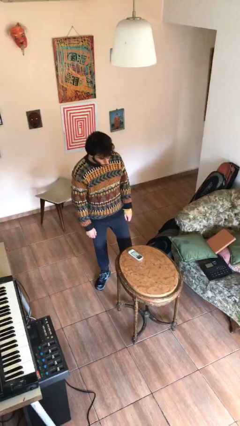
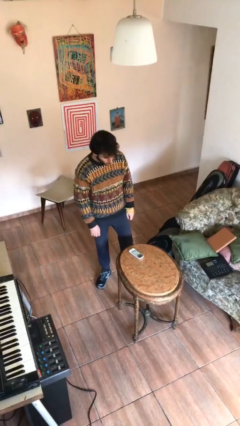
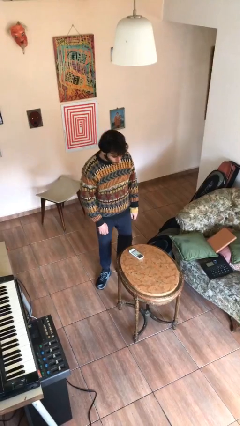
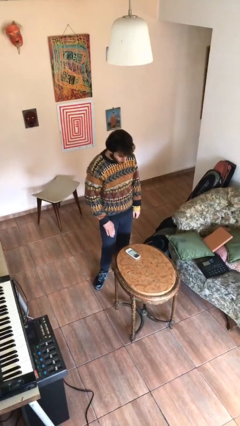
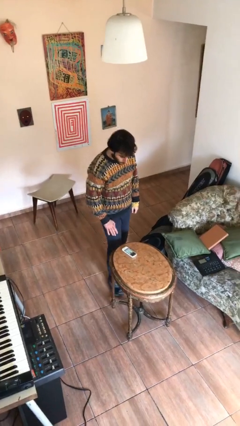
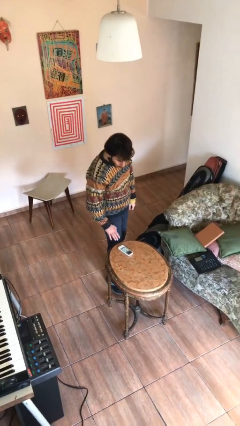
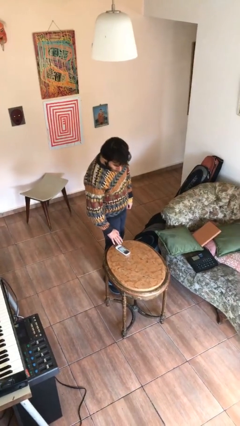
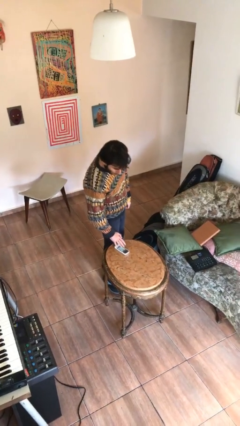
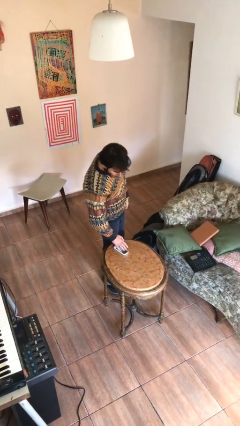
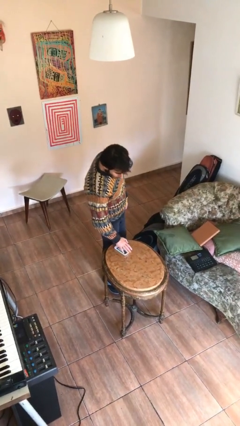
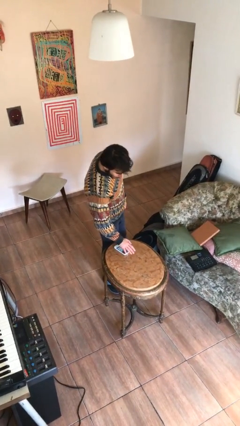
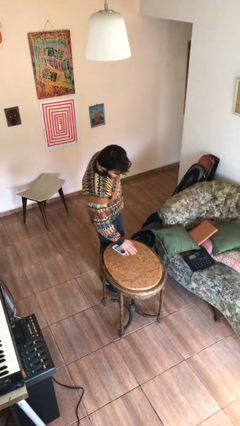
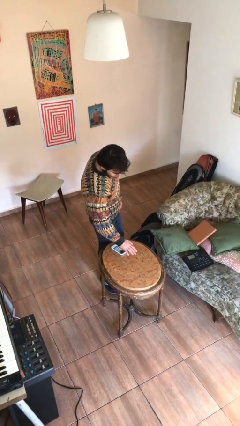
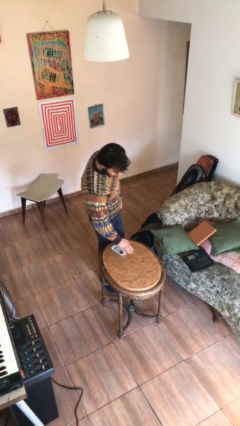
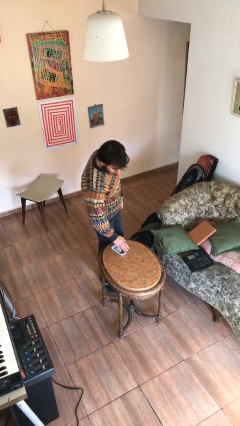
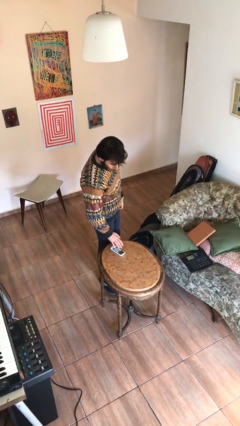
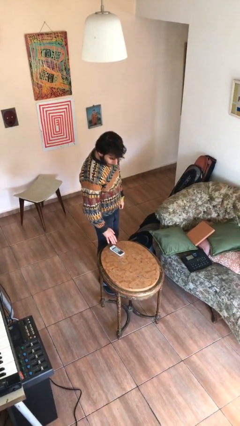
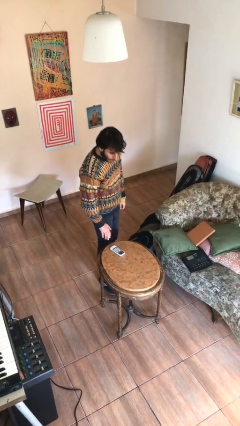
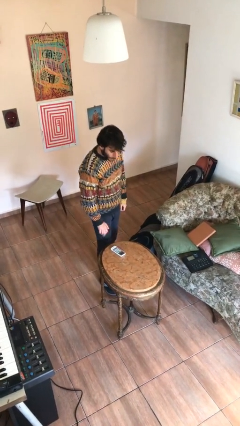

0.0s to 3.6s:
person waves hand over object

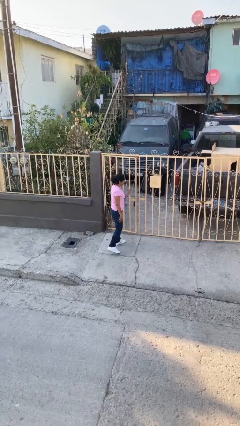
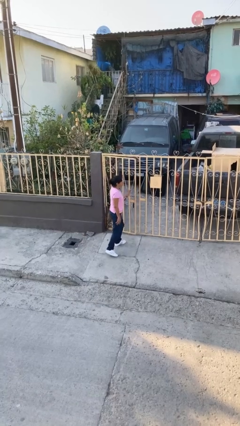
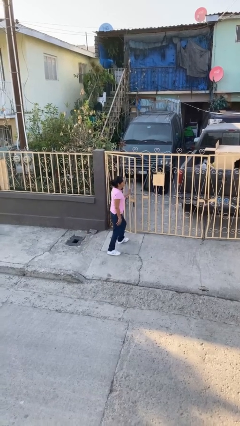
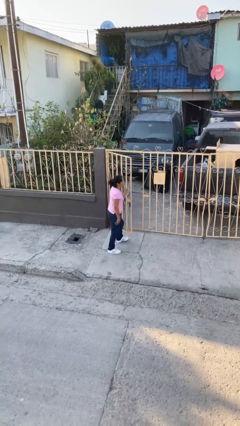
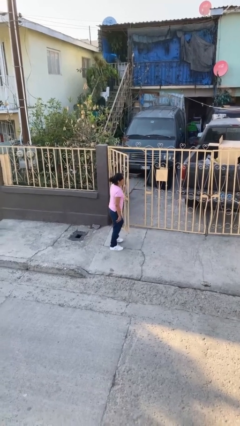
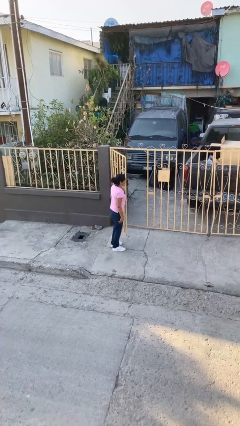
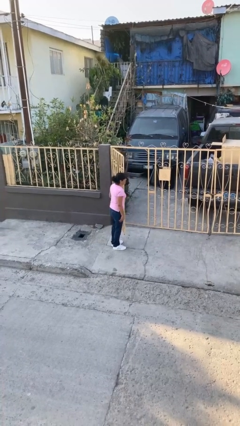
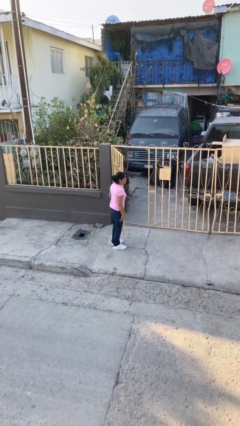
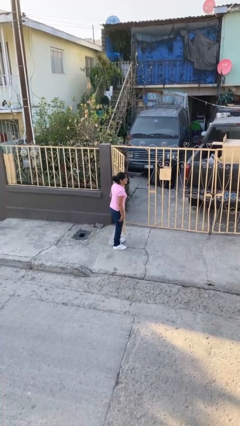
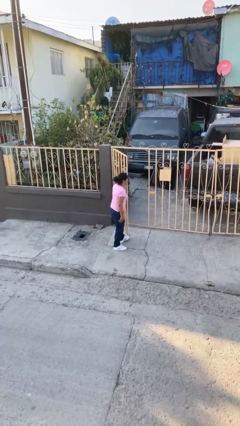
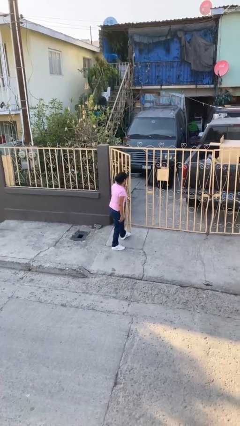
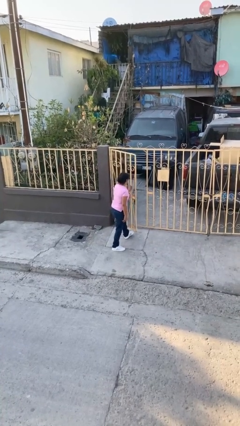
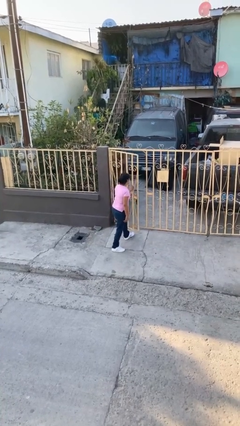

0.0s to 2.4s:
person opens facility door

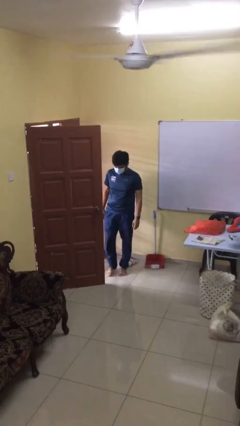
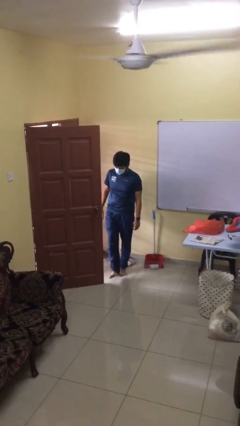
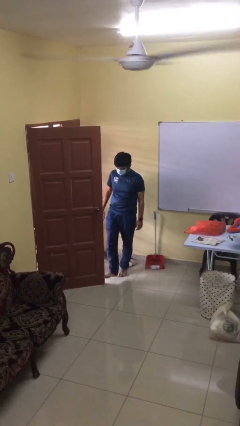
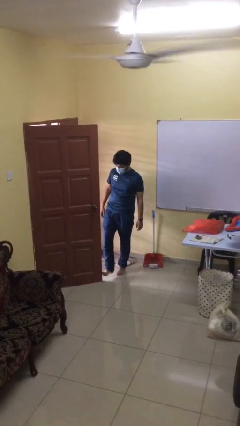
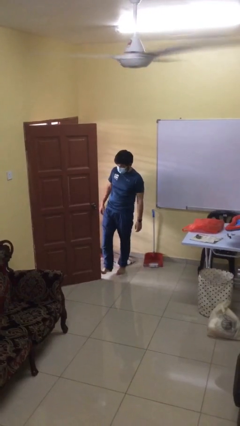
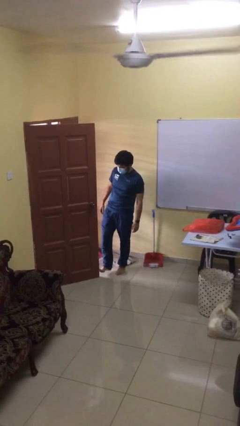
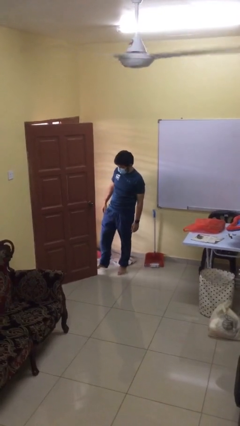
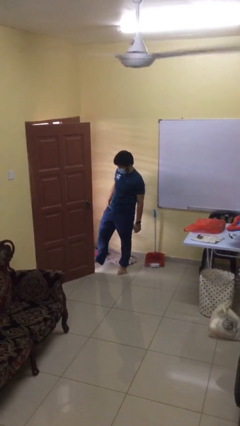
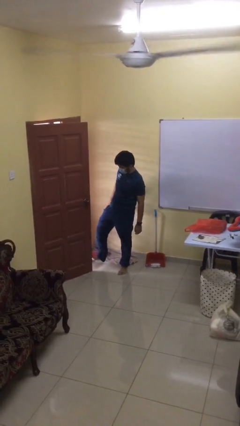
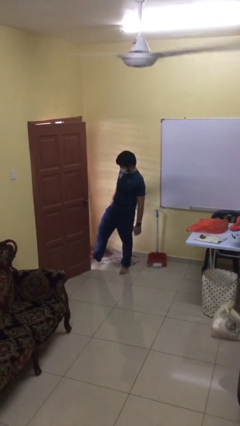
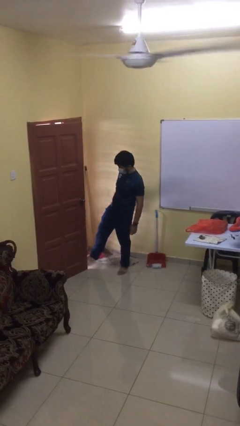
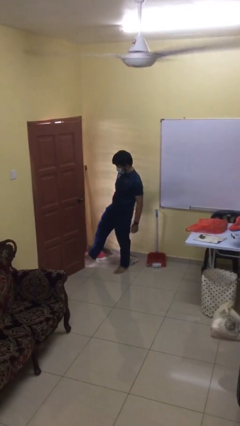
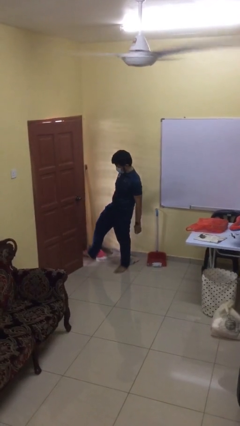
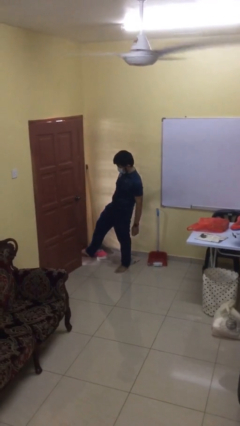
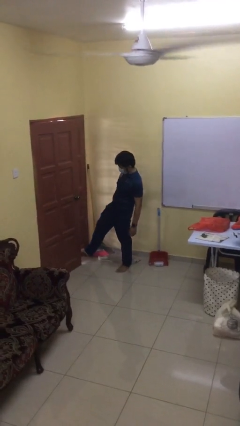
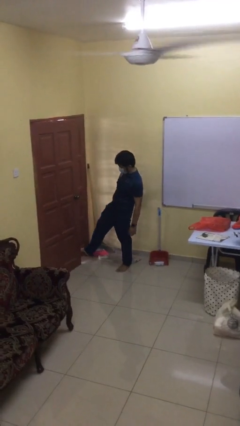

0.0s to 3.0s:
person closes door with foot

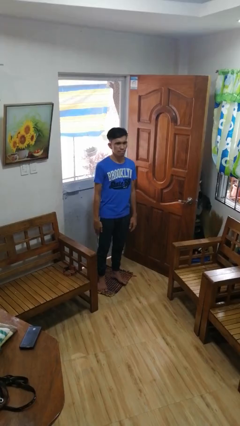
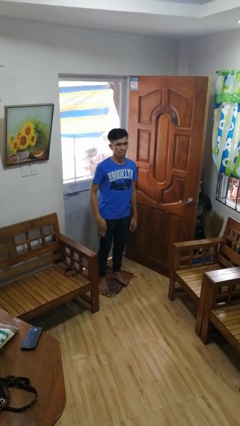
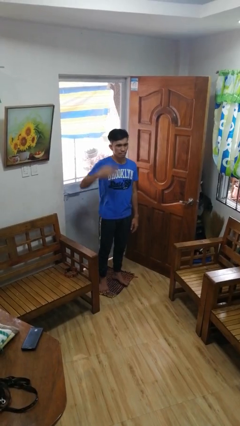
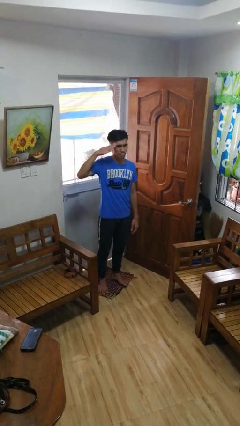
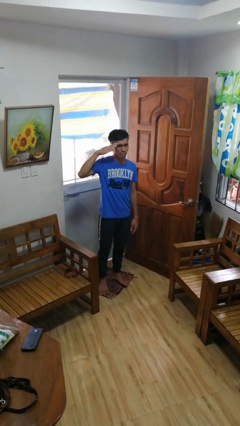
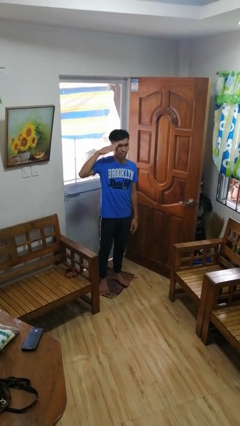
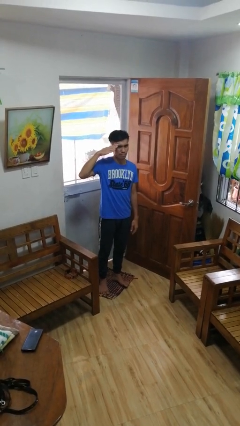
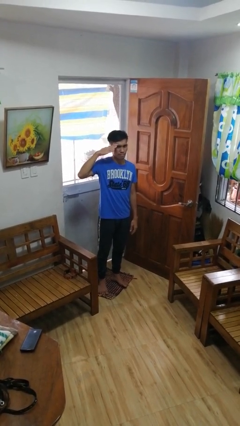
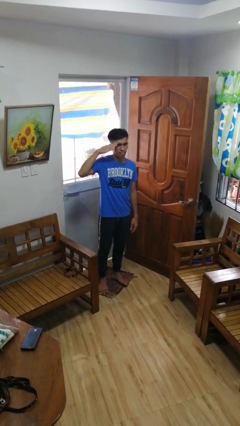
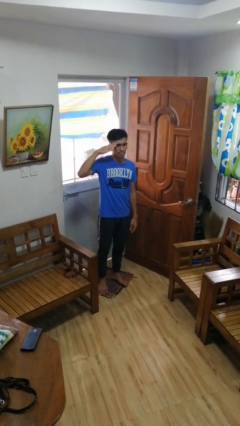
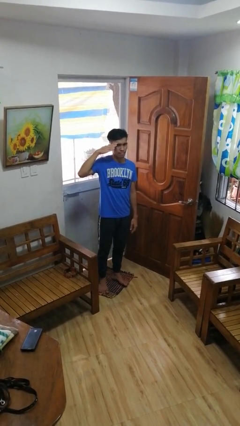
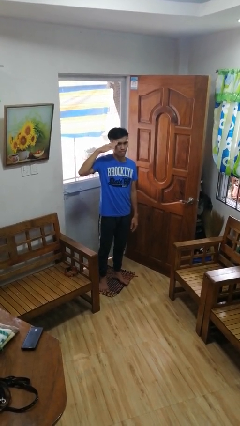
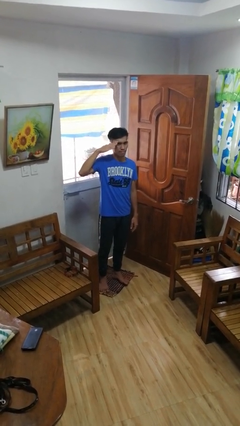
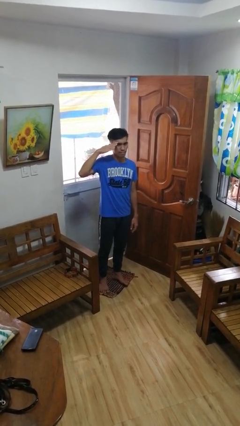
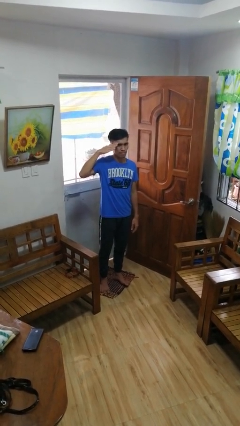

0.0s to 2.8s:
person salutes

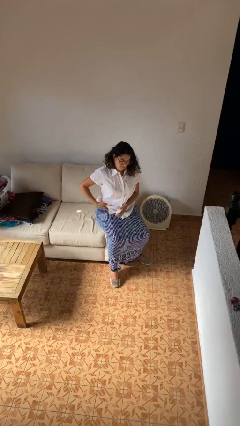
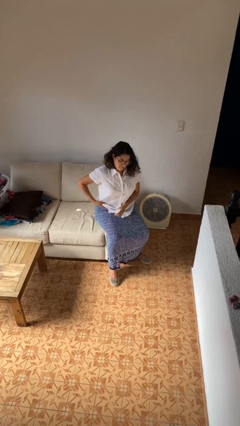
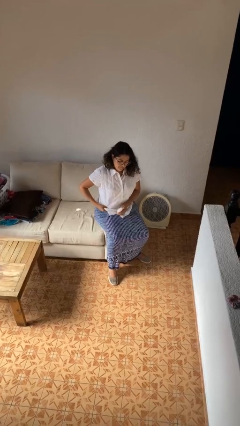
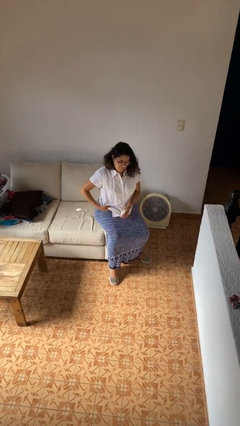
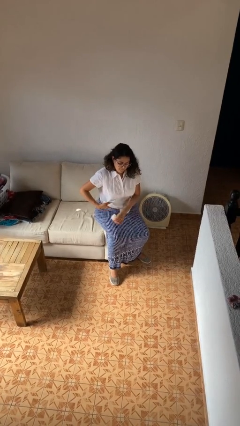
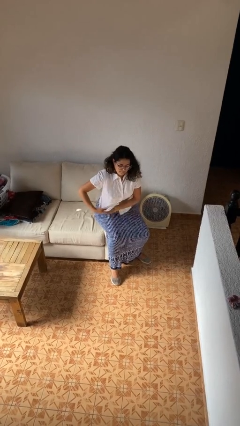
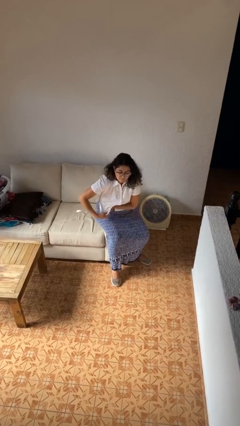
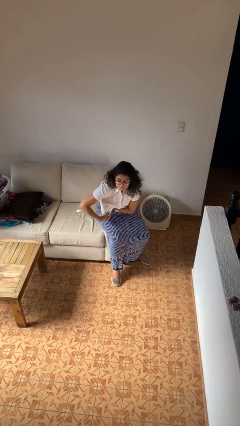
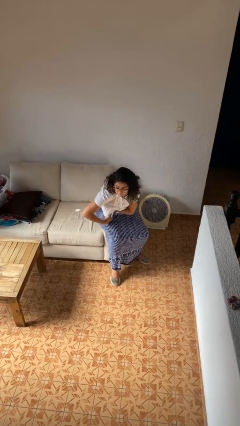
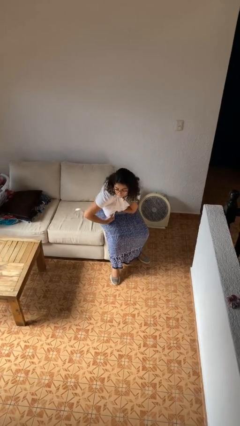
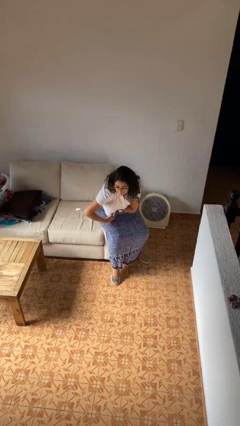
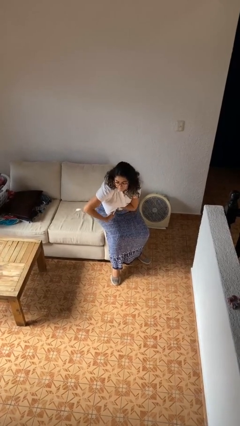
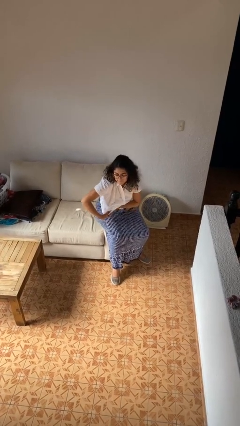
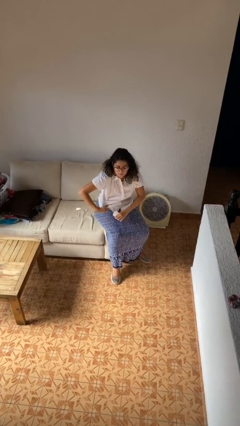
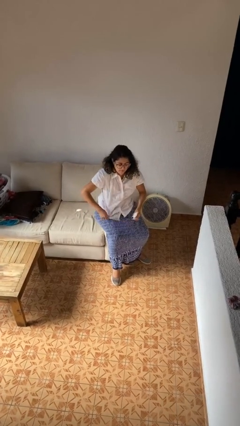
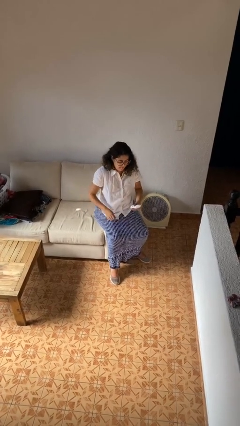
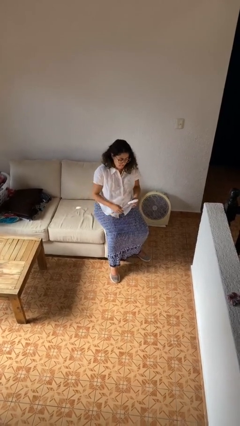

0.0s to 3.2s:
person applies deodorant

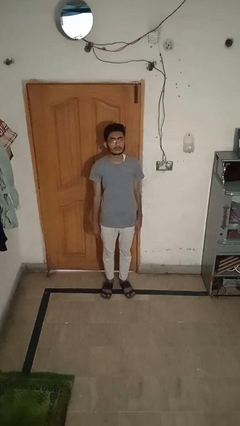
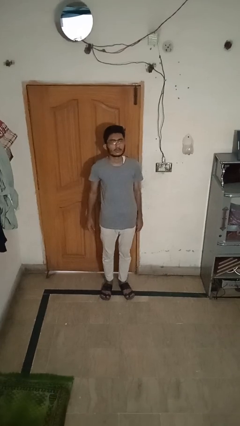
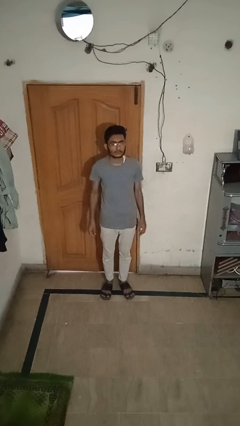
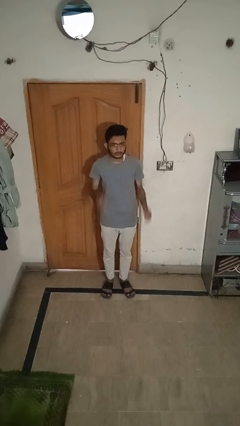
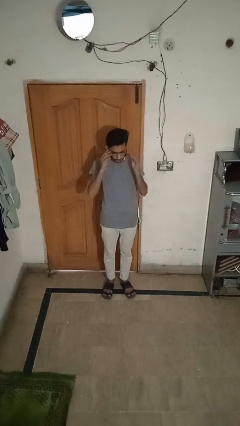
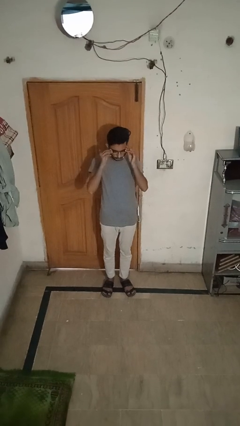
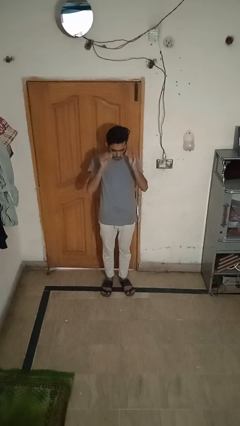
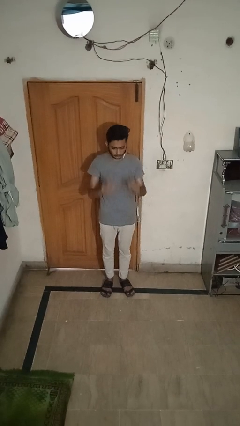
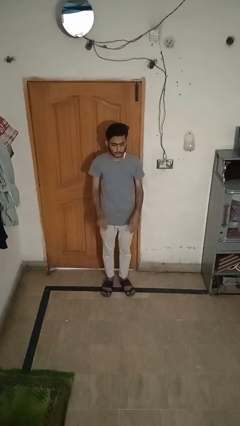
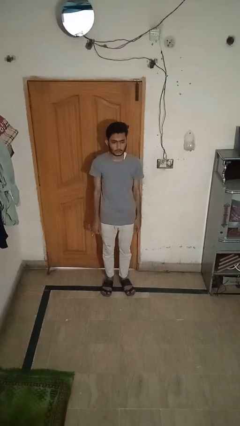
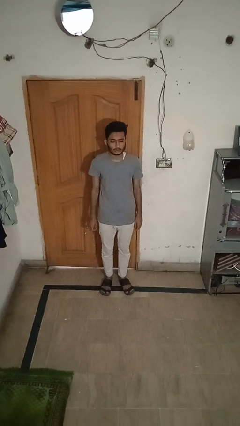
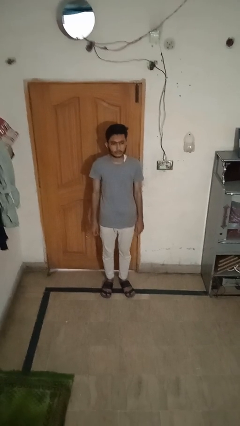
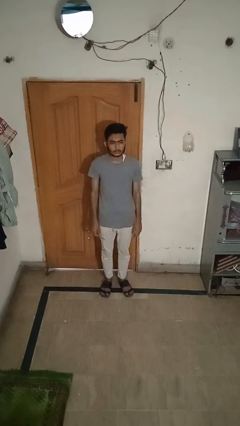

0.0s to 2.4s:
person takes off glasses

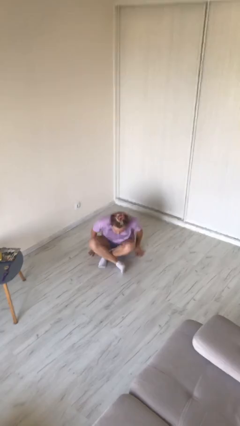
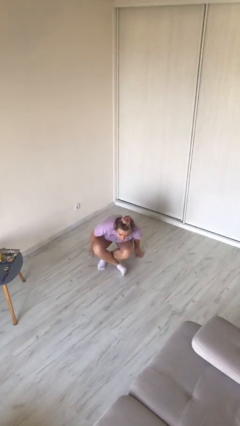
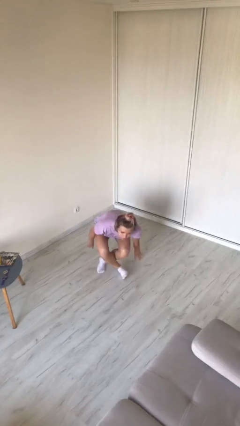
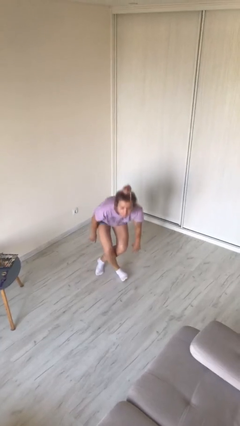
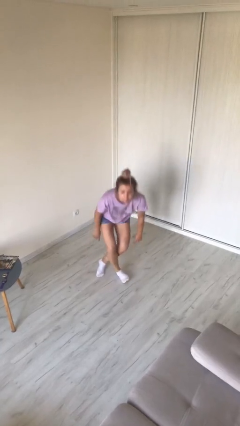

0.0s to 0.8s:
person stands up from floor
